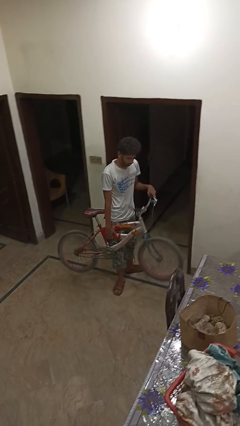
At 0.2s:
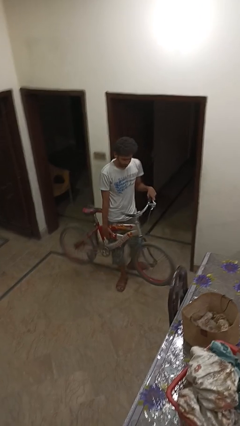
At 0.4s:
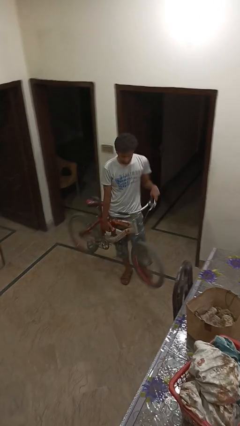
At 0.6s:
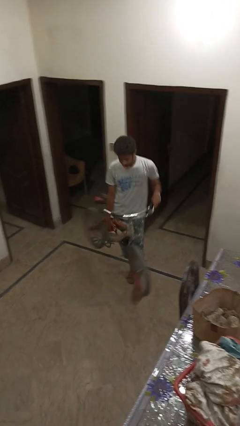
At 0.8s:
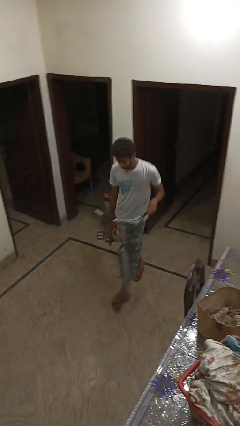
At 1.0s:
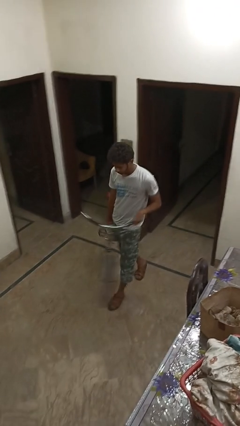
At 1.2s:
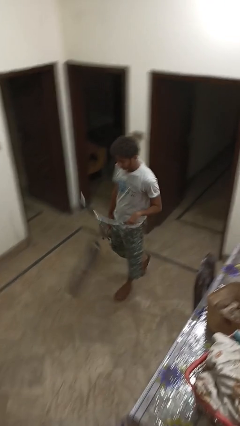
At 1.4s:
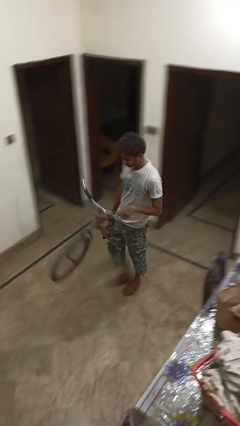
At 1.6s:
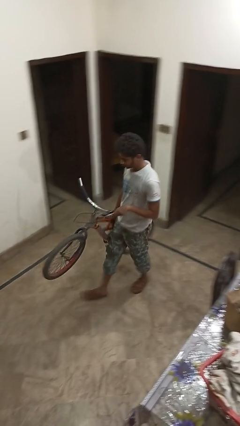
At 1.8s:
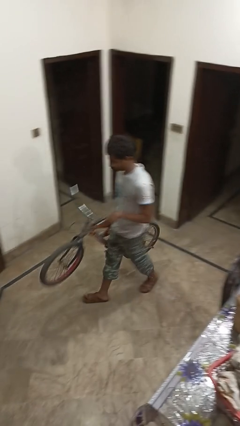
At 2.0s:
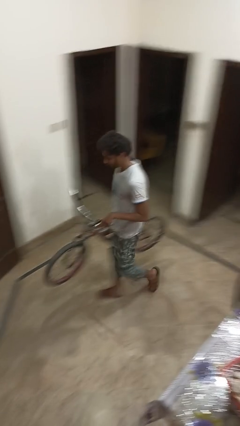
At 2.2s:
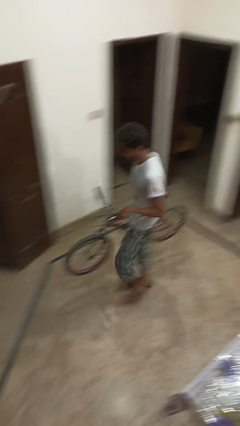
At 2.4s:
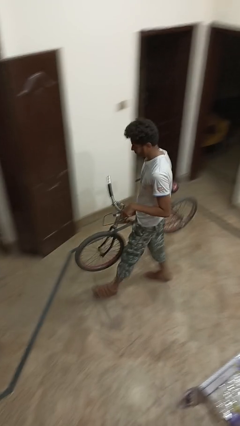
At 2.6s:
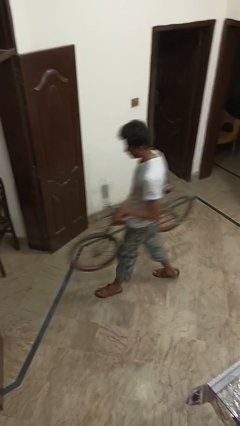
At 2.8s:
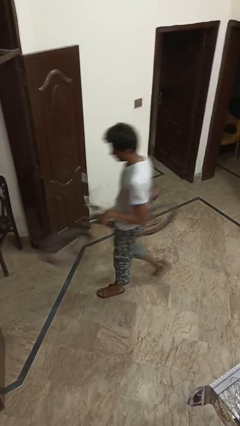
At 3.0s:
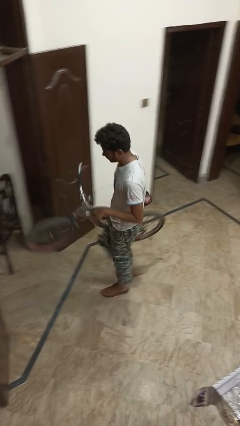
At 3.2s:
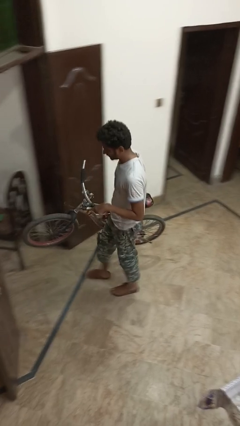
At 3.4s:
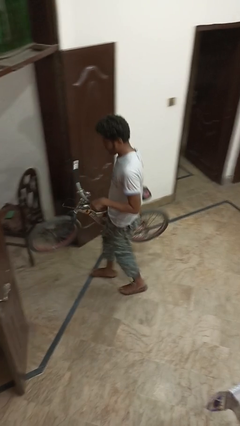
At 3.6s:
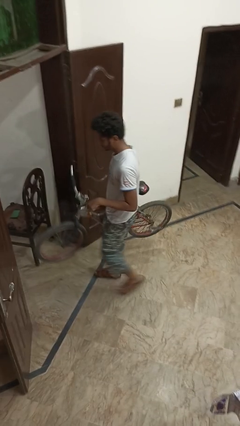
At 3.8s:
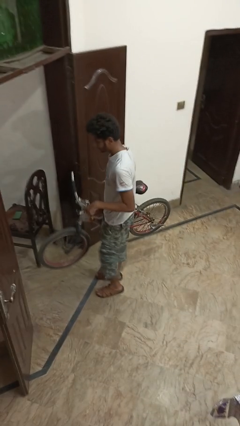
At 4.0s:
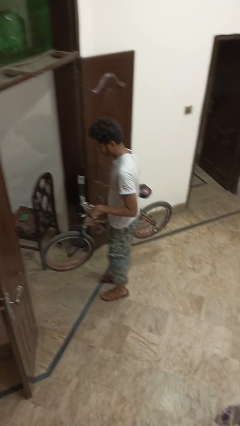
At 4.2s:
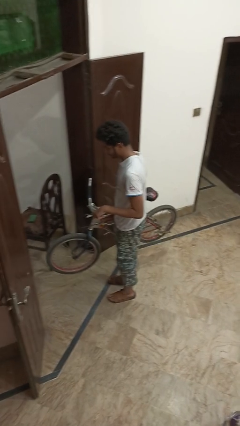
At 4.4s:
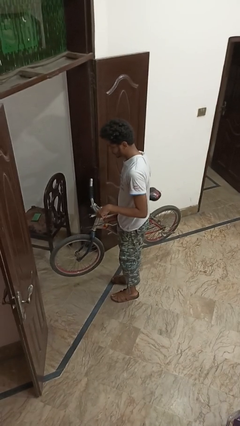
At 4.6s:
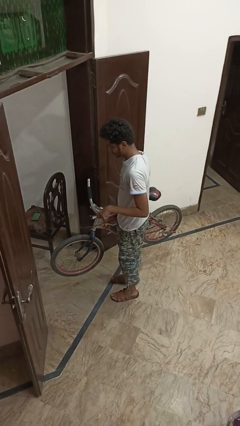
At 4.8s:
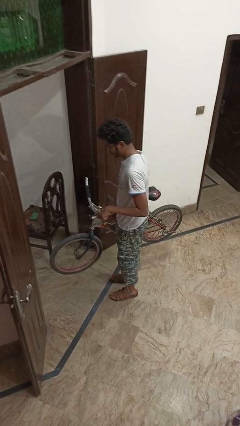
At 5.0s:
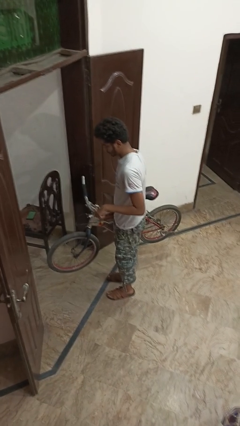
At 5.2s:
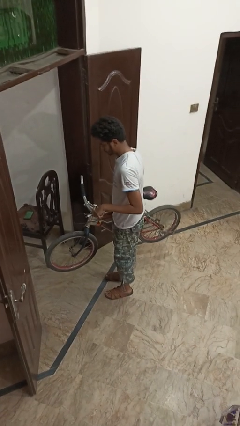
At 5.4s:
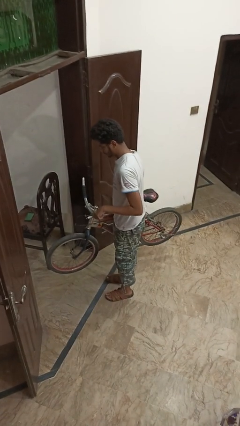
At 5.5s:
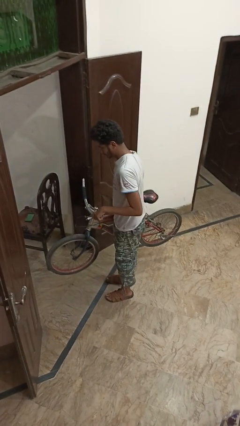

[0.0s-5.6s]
person carries bicycle

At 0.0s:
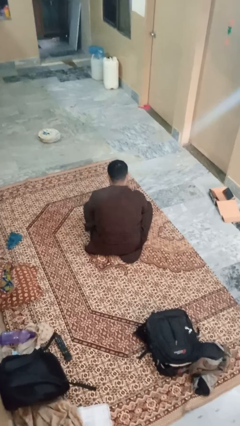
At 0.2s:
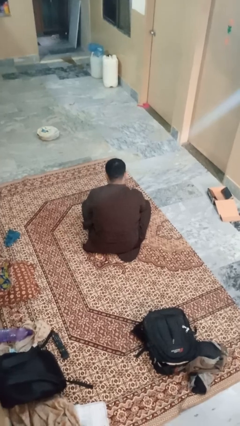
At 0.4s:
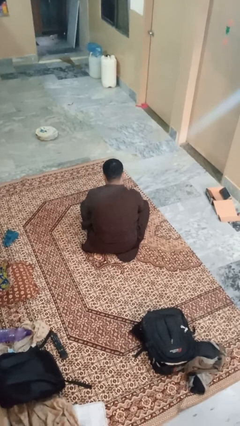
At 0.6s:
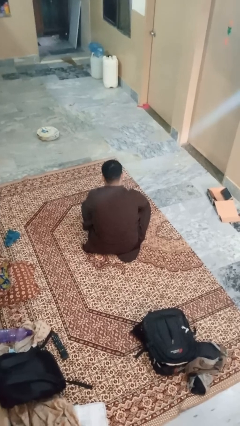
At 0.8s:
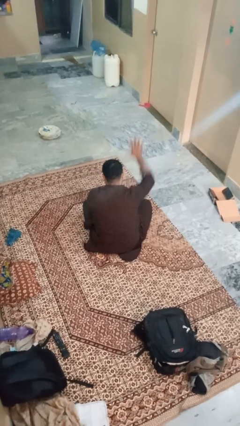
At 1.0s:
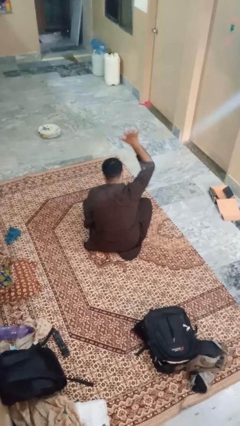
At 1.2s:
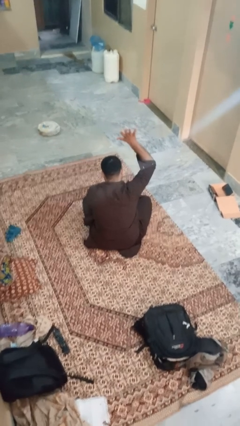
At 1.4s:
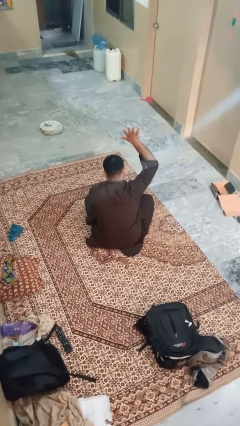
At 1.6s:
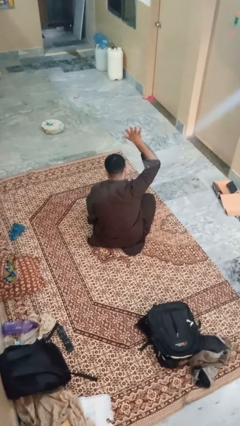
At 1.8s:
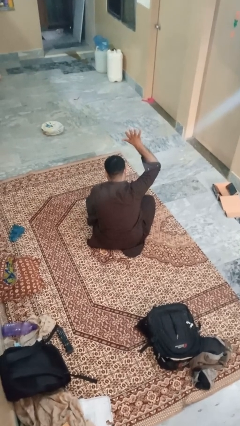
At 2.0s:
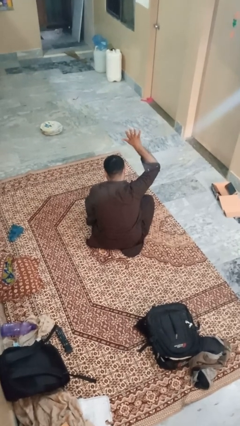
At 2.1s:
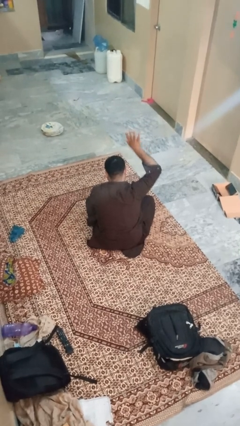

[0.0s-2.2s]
person gestures number five

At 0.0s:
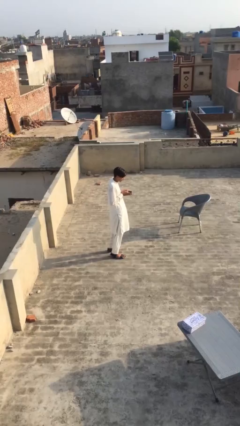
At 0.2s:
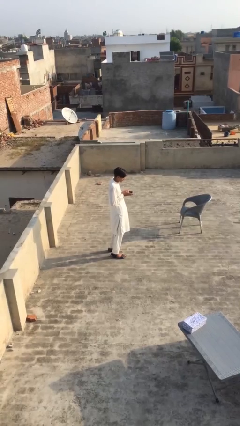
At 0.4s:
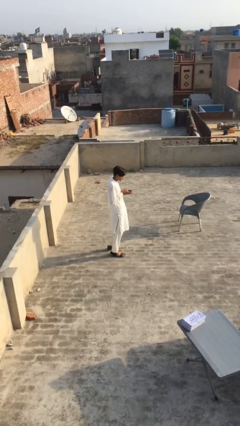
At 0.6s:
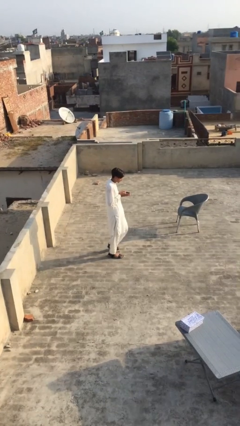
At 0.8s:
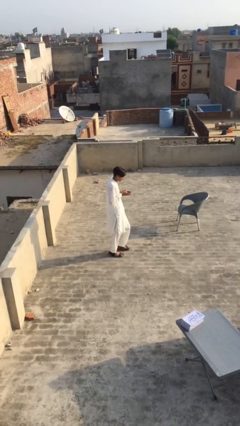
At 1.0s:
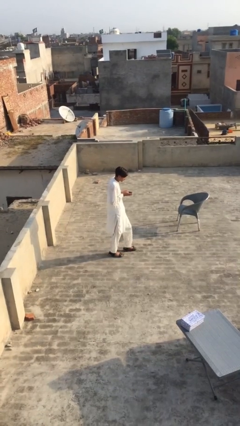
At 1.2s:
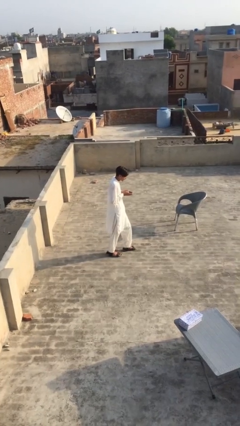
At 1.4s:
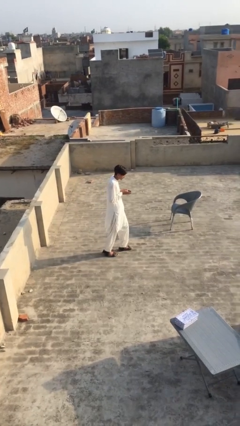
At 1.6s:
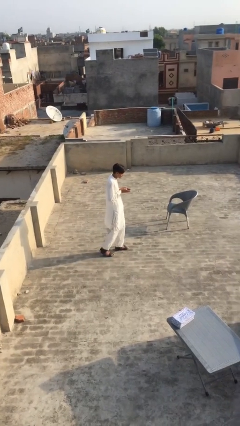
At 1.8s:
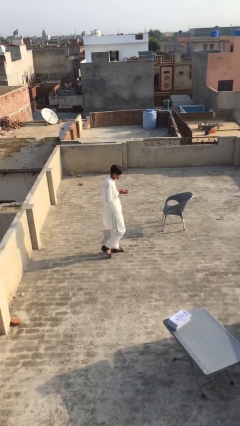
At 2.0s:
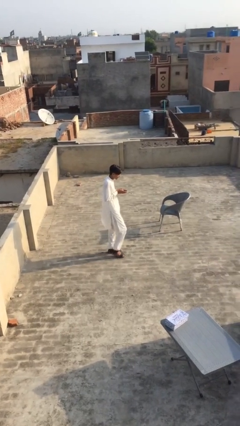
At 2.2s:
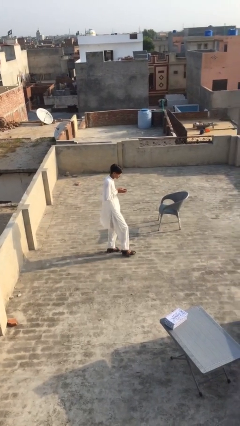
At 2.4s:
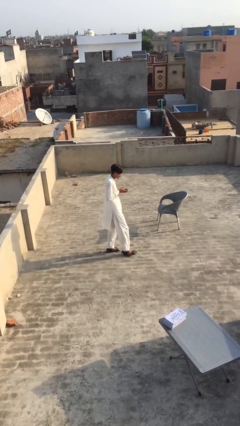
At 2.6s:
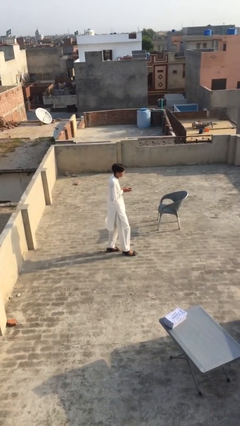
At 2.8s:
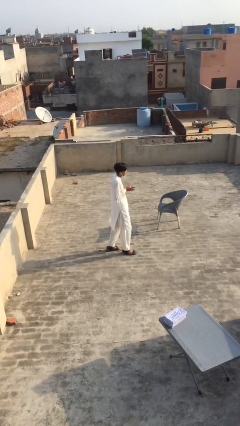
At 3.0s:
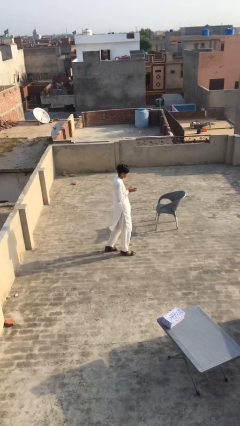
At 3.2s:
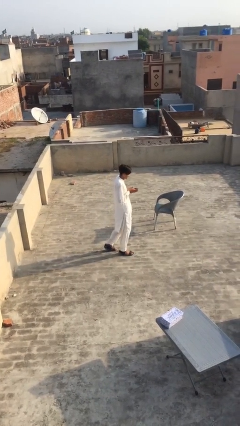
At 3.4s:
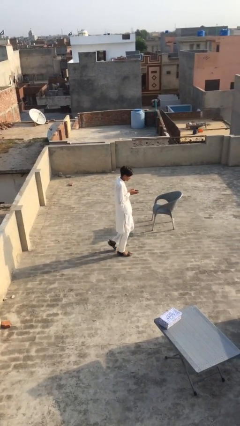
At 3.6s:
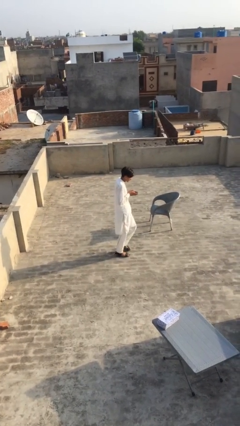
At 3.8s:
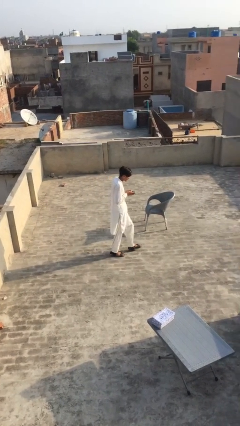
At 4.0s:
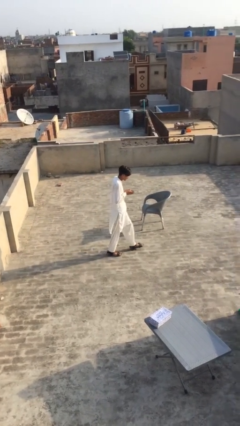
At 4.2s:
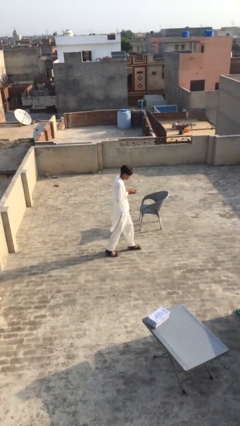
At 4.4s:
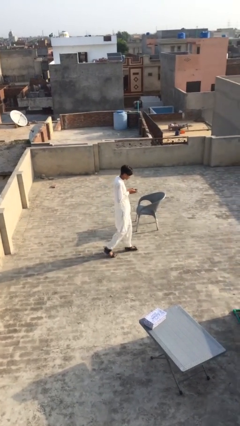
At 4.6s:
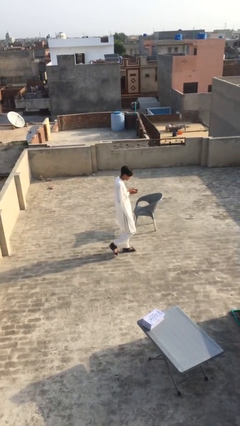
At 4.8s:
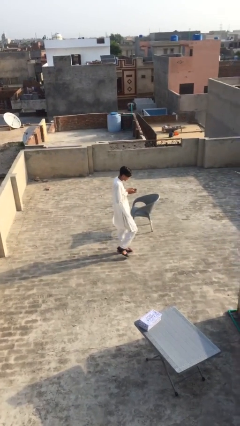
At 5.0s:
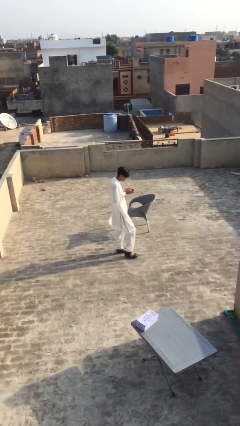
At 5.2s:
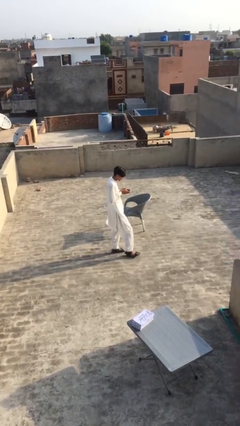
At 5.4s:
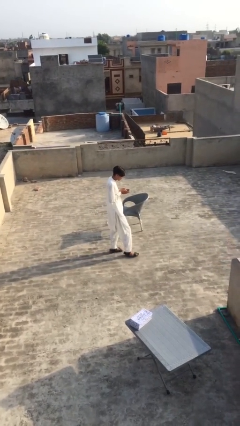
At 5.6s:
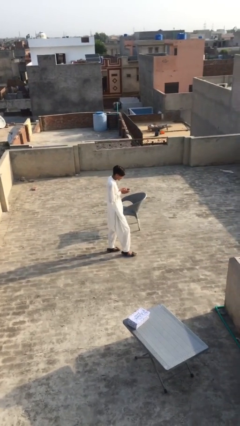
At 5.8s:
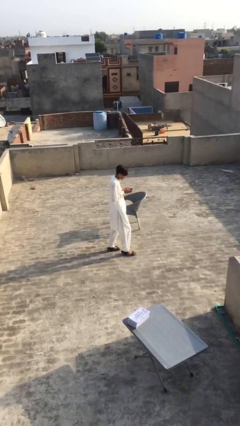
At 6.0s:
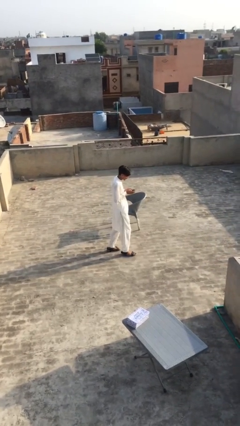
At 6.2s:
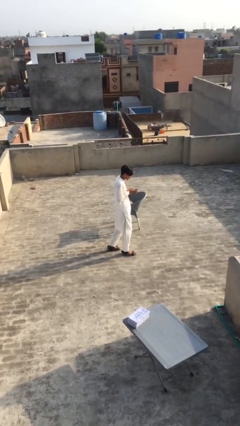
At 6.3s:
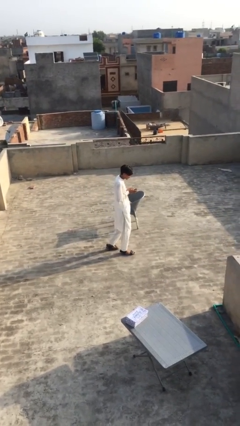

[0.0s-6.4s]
person texts on phone

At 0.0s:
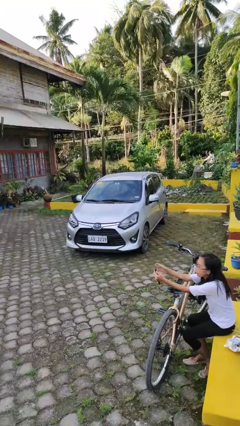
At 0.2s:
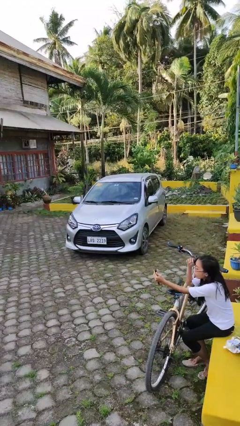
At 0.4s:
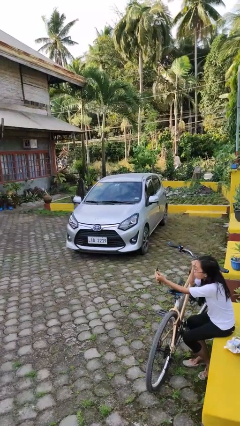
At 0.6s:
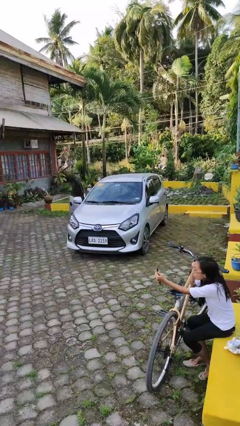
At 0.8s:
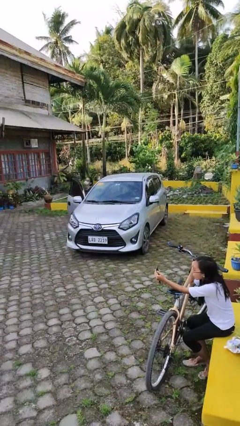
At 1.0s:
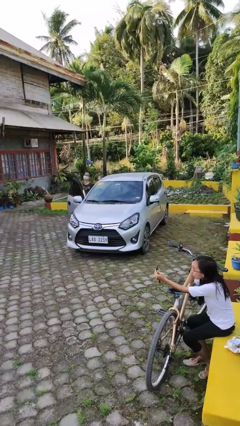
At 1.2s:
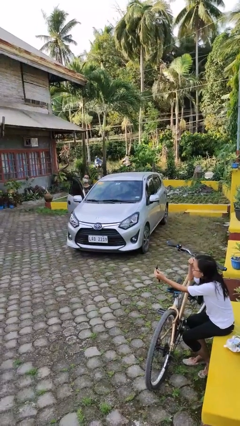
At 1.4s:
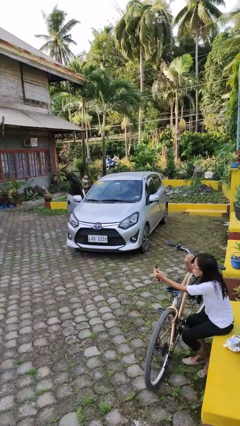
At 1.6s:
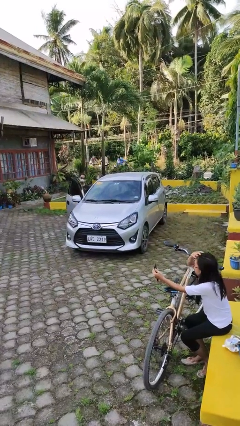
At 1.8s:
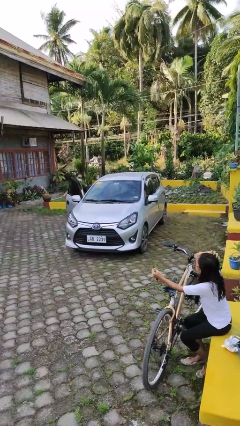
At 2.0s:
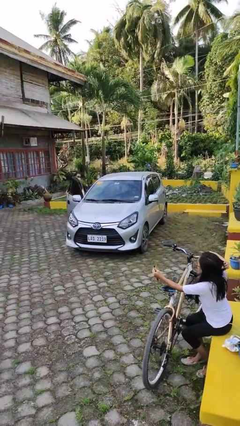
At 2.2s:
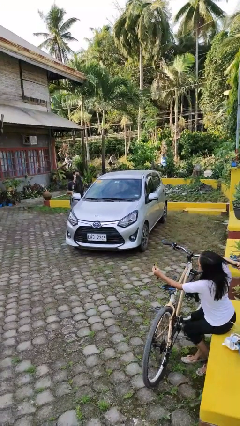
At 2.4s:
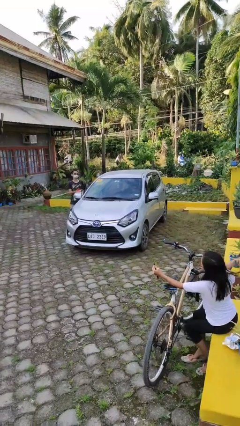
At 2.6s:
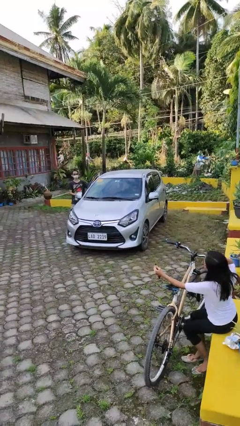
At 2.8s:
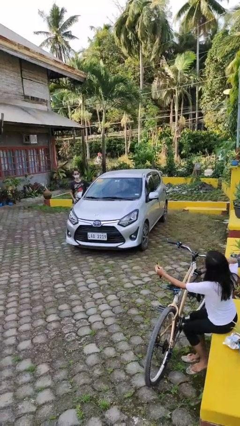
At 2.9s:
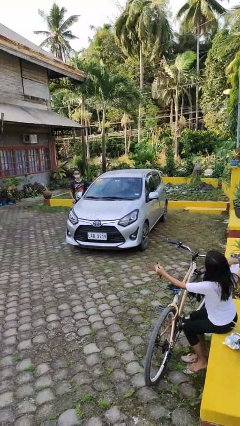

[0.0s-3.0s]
car drops off person

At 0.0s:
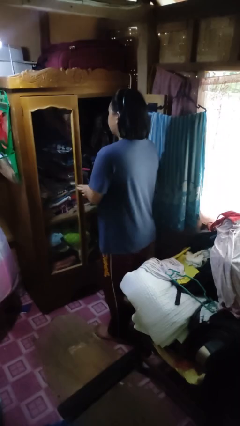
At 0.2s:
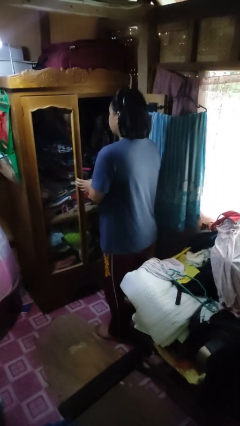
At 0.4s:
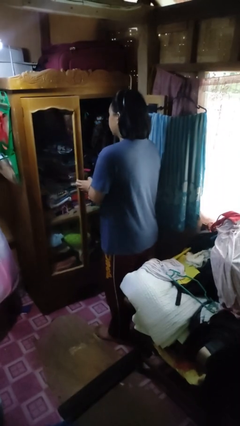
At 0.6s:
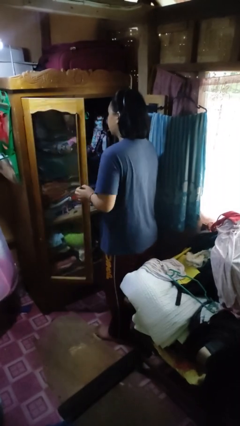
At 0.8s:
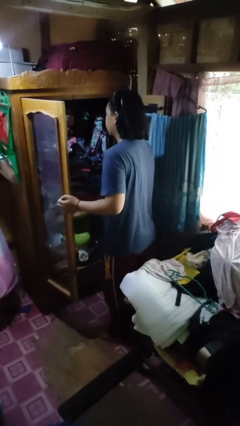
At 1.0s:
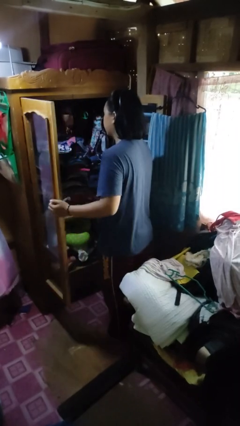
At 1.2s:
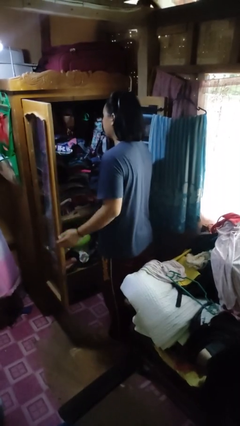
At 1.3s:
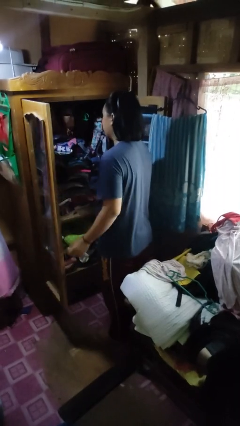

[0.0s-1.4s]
person opens closet door
